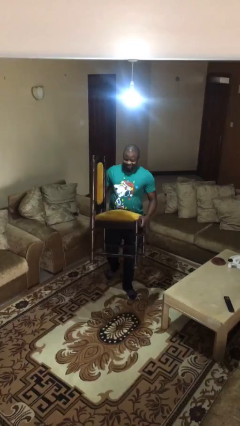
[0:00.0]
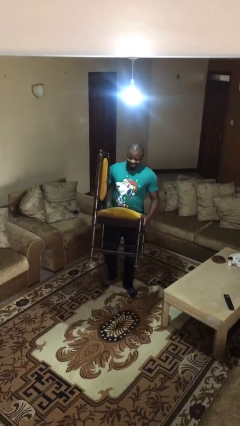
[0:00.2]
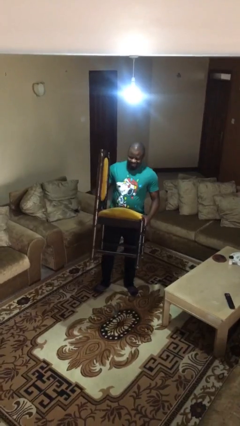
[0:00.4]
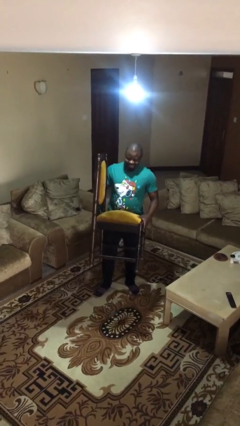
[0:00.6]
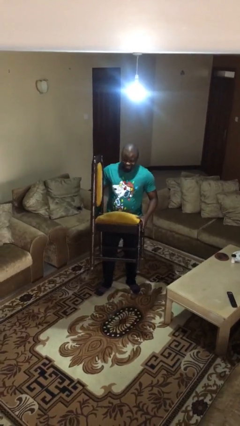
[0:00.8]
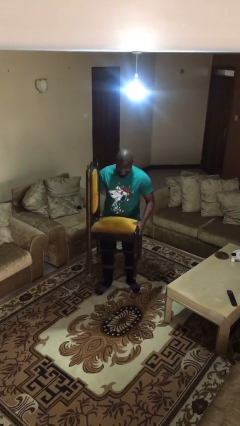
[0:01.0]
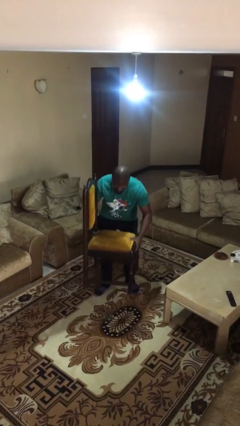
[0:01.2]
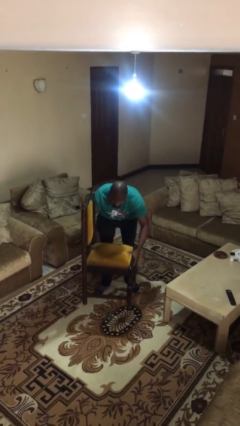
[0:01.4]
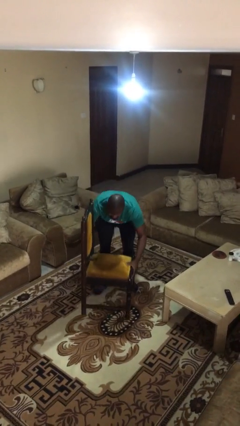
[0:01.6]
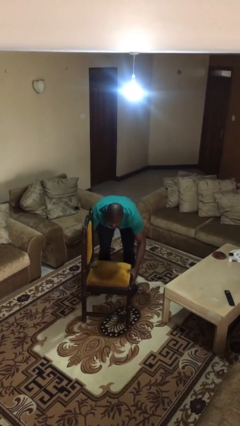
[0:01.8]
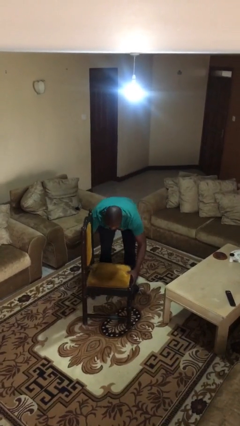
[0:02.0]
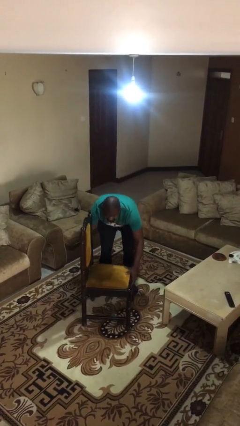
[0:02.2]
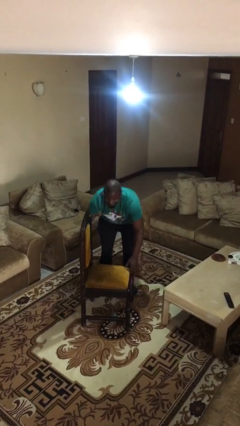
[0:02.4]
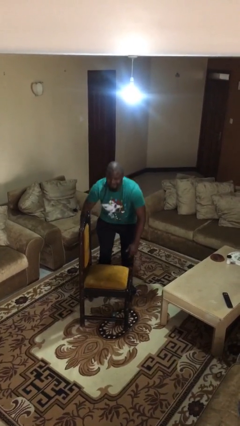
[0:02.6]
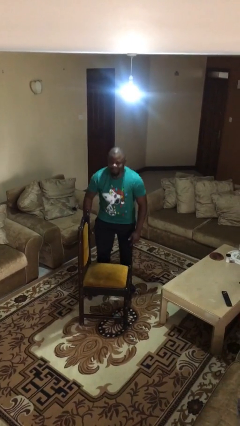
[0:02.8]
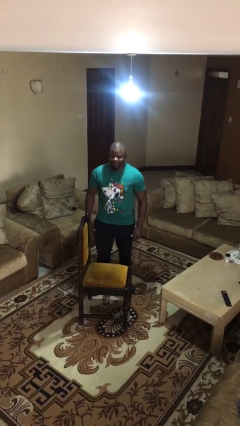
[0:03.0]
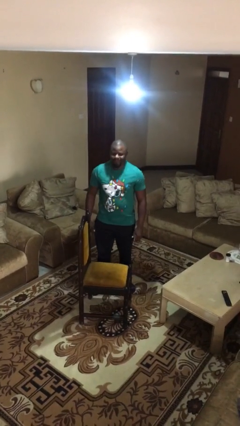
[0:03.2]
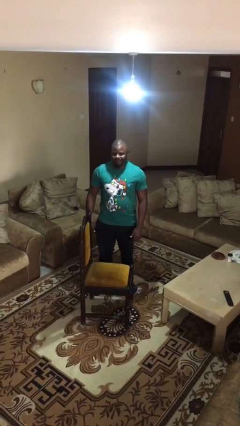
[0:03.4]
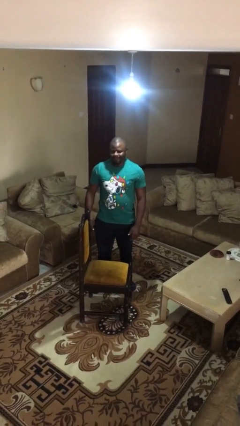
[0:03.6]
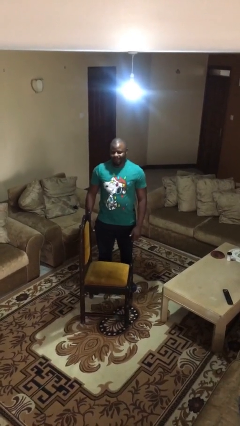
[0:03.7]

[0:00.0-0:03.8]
person puts down object on floor

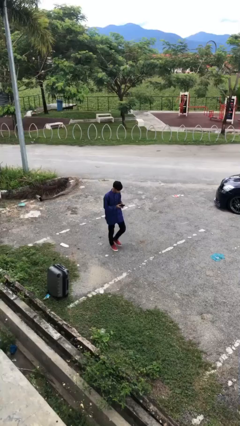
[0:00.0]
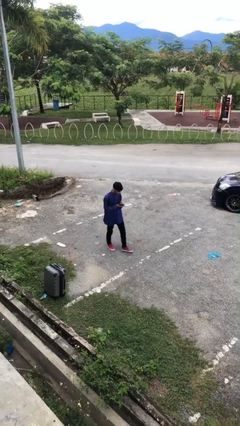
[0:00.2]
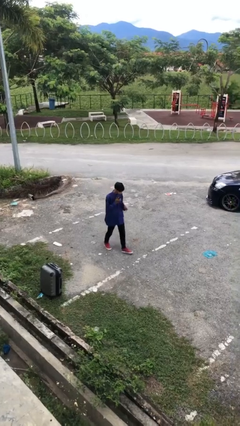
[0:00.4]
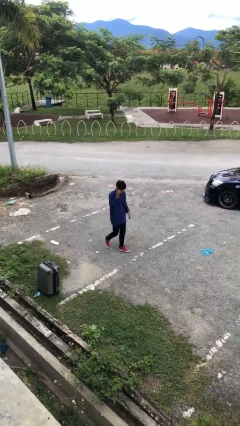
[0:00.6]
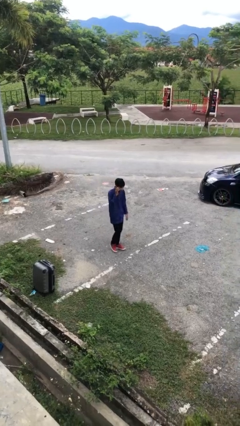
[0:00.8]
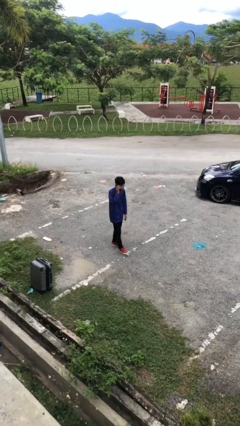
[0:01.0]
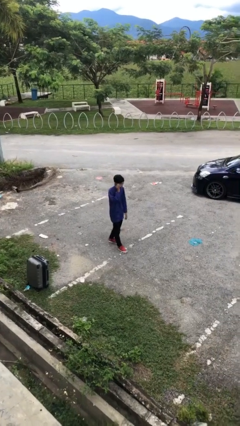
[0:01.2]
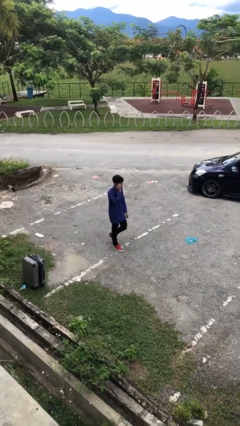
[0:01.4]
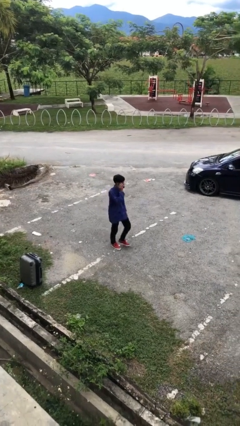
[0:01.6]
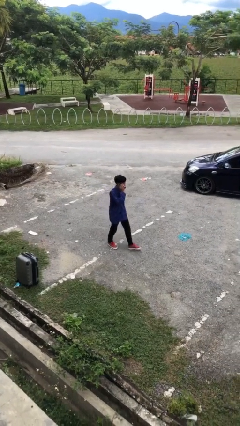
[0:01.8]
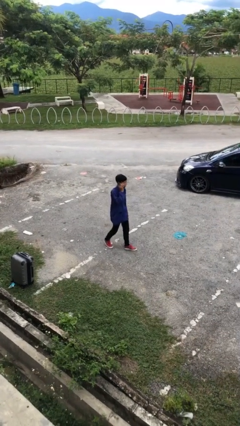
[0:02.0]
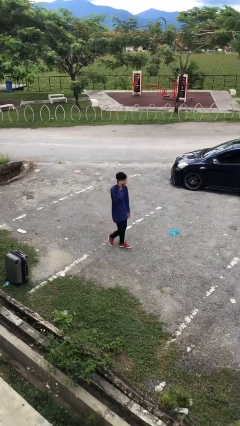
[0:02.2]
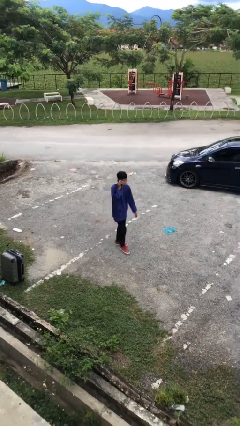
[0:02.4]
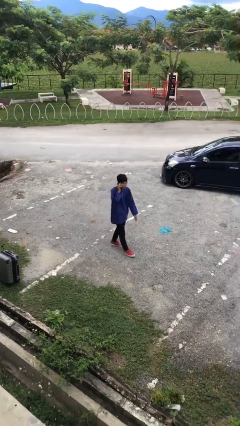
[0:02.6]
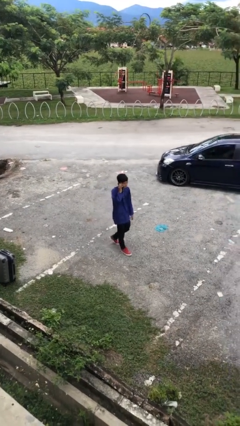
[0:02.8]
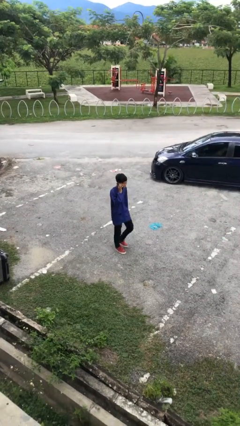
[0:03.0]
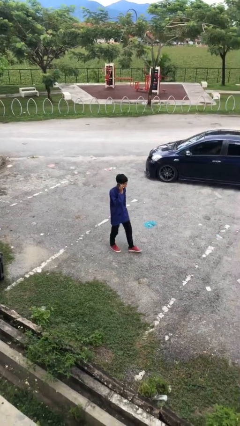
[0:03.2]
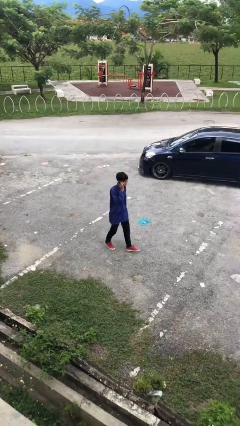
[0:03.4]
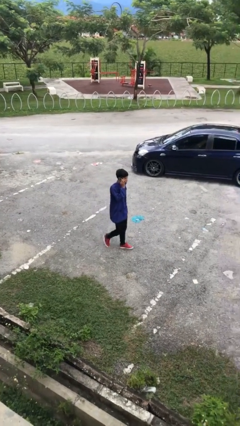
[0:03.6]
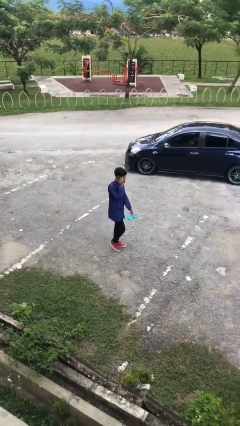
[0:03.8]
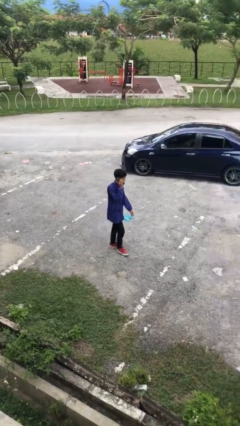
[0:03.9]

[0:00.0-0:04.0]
person talks on phone

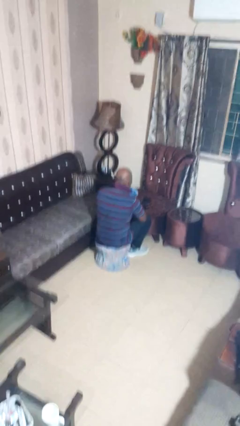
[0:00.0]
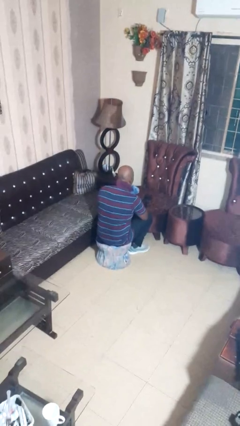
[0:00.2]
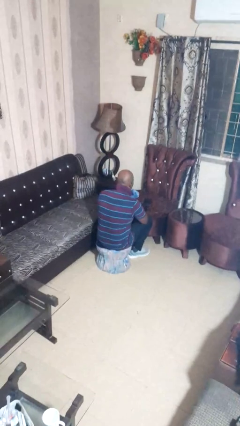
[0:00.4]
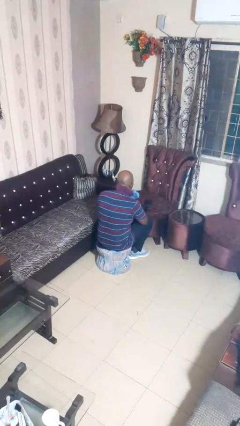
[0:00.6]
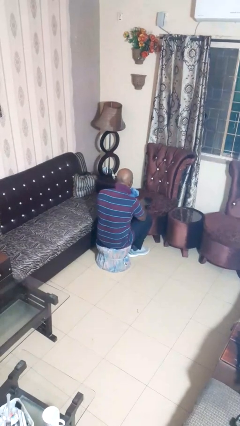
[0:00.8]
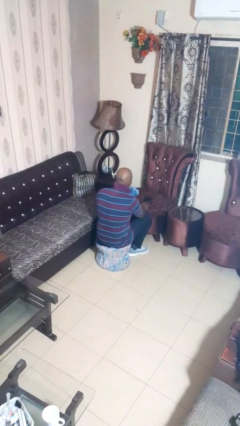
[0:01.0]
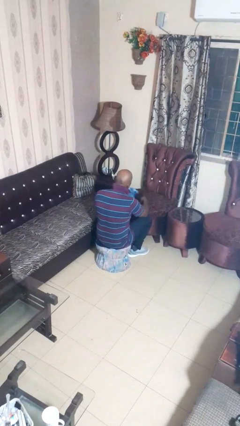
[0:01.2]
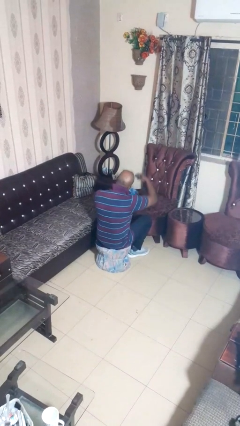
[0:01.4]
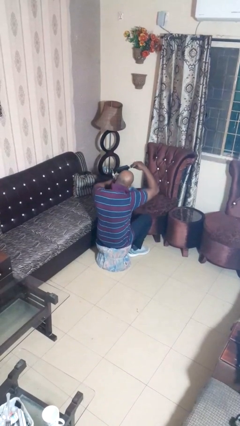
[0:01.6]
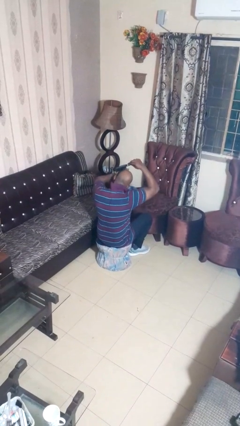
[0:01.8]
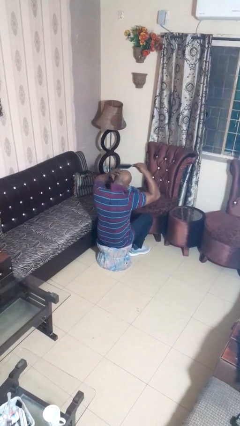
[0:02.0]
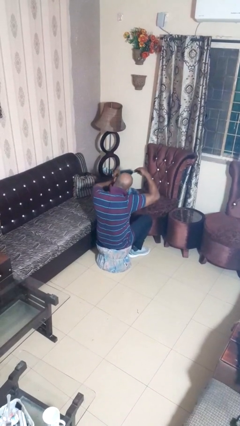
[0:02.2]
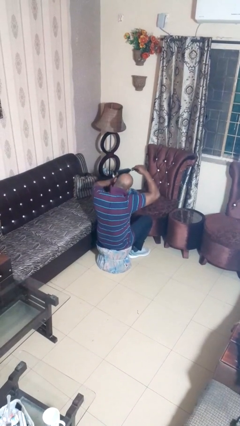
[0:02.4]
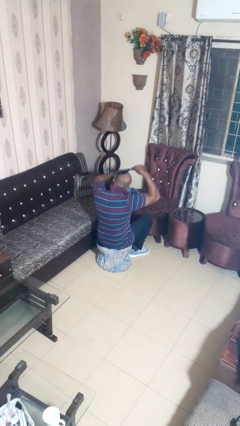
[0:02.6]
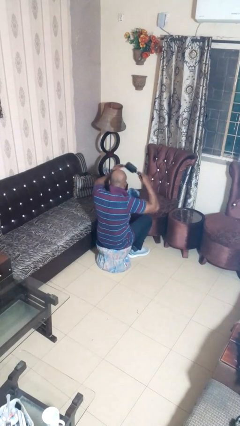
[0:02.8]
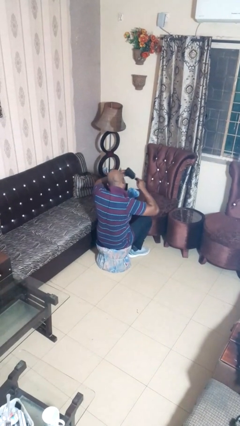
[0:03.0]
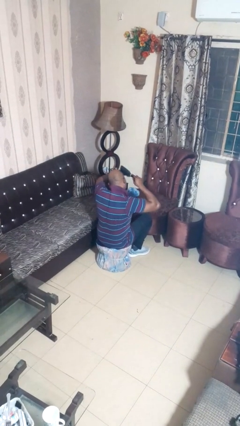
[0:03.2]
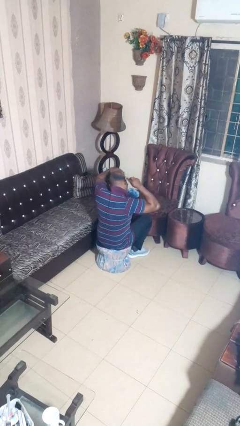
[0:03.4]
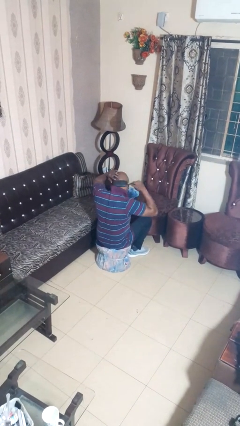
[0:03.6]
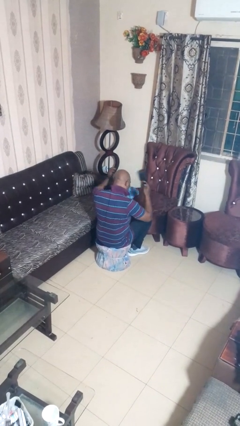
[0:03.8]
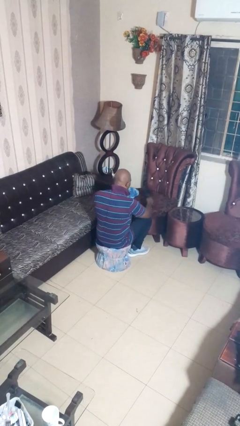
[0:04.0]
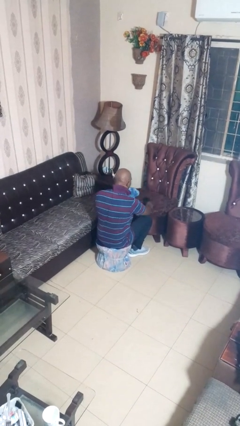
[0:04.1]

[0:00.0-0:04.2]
person brushes hair

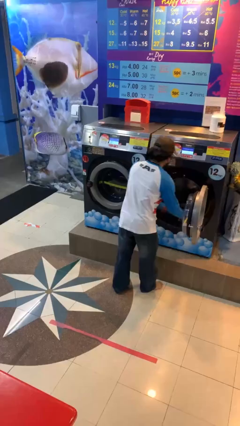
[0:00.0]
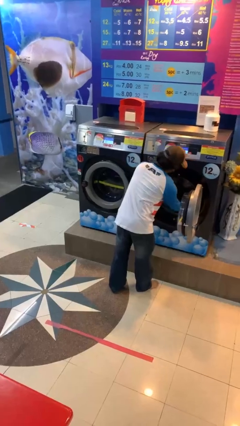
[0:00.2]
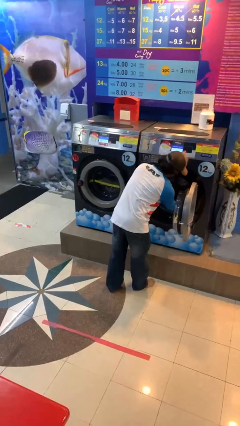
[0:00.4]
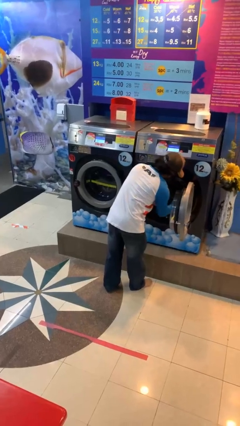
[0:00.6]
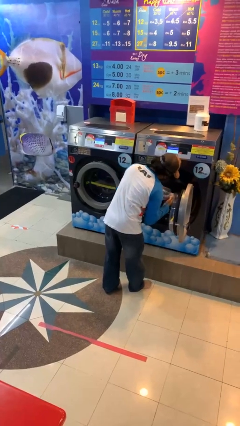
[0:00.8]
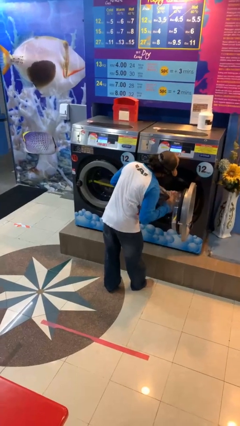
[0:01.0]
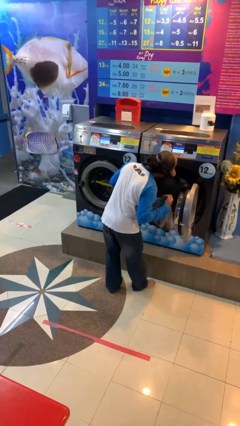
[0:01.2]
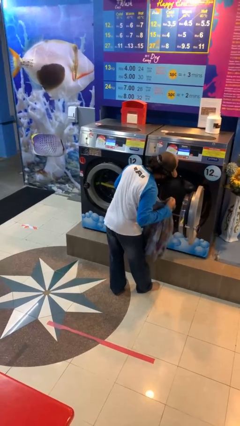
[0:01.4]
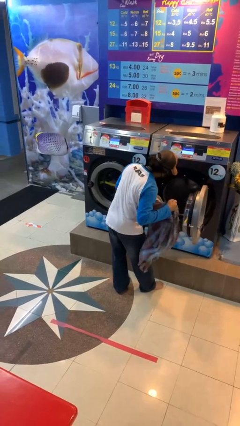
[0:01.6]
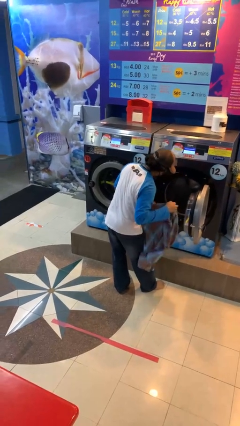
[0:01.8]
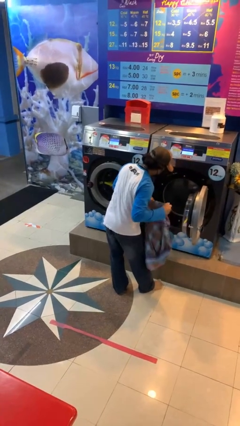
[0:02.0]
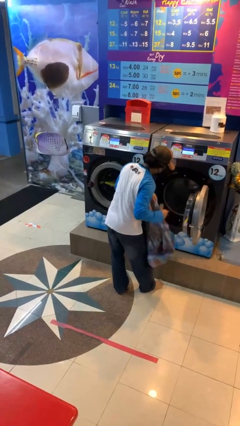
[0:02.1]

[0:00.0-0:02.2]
person unloads clotheswasher

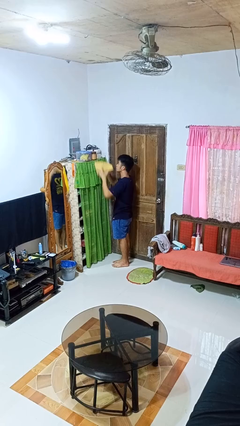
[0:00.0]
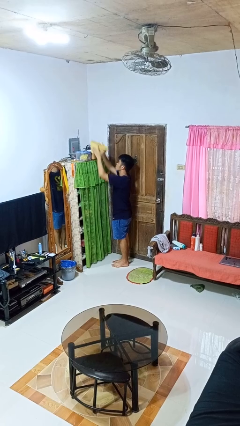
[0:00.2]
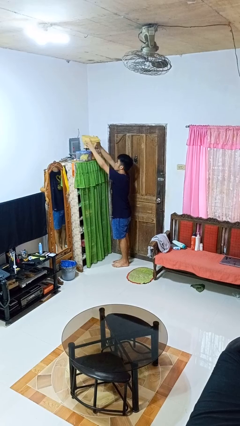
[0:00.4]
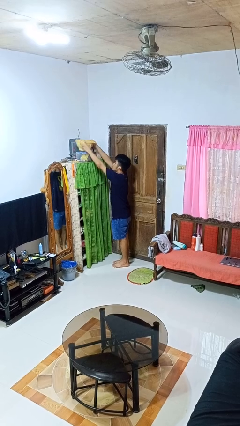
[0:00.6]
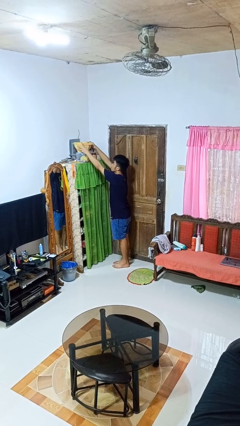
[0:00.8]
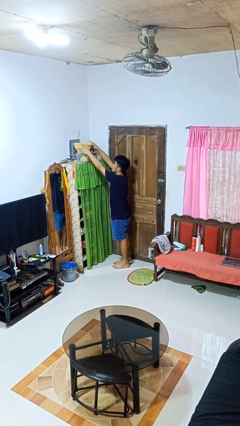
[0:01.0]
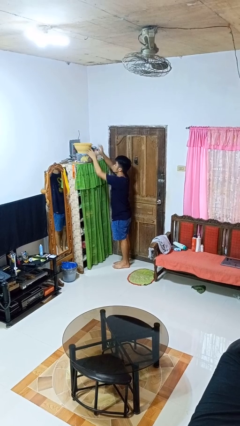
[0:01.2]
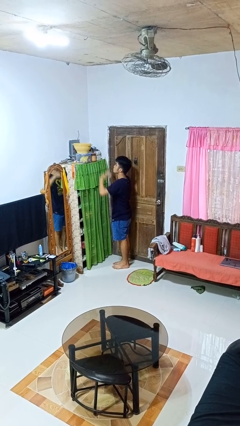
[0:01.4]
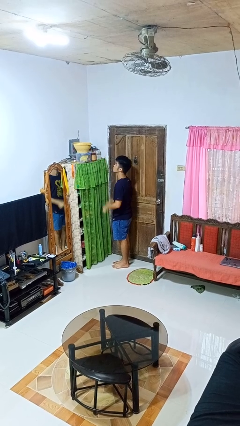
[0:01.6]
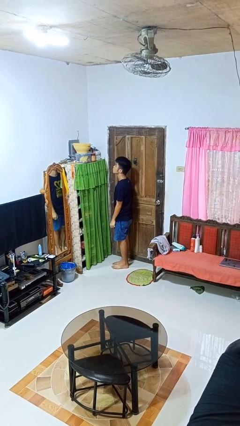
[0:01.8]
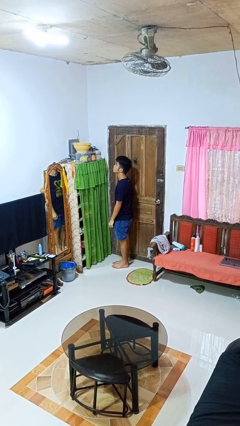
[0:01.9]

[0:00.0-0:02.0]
person puts down object on shelf

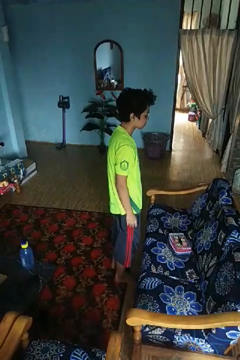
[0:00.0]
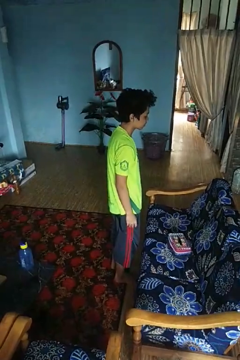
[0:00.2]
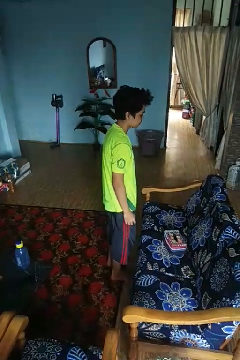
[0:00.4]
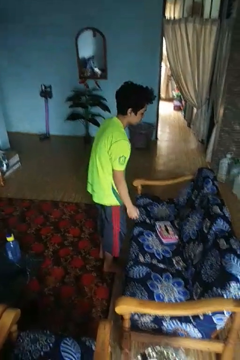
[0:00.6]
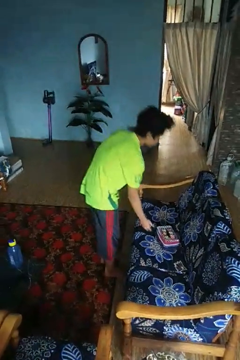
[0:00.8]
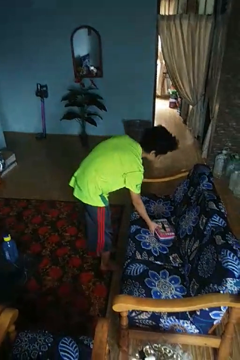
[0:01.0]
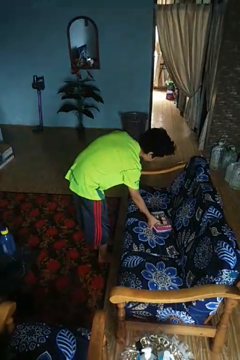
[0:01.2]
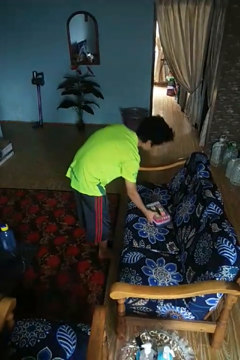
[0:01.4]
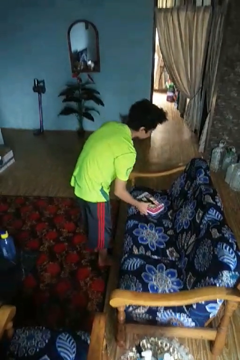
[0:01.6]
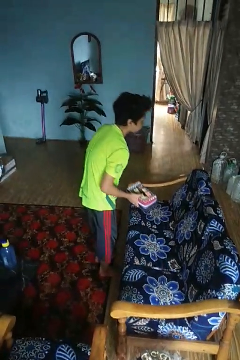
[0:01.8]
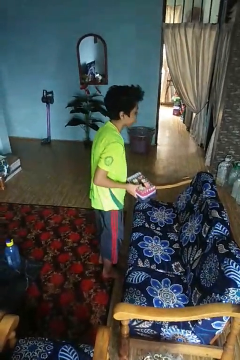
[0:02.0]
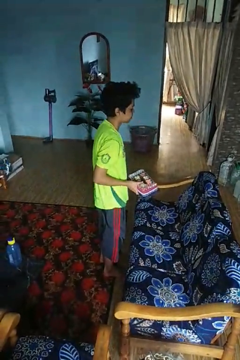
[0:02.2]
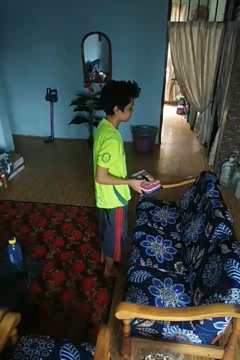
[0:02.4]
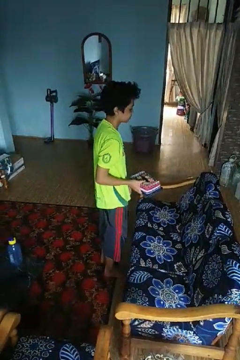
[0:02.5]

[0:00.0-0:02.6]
person picks up object from couch
